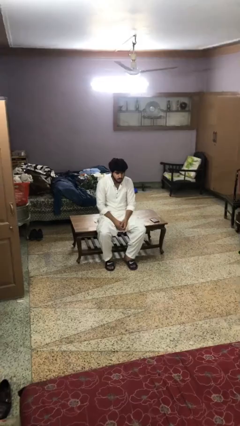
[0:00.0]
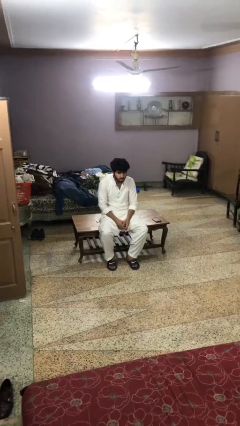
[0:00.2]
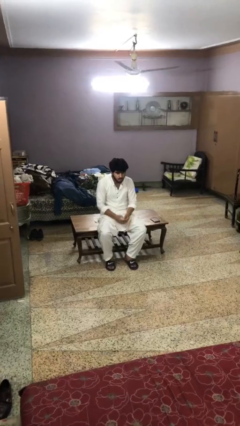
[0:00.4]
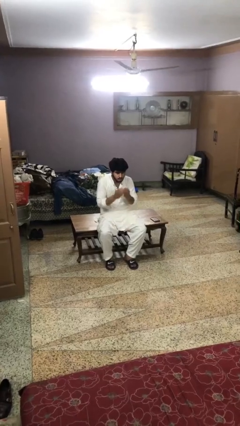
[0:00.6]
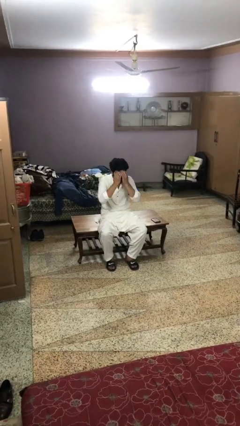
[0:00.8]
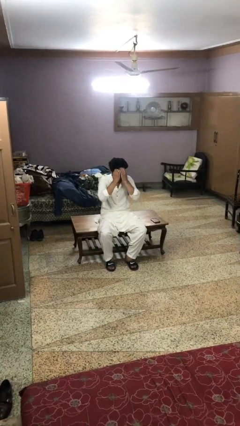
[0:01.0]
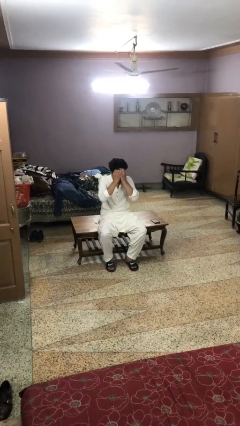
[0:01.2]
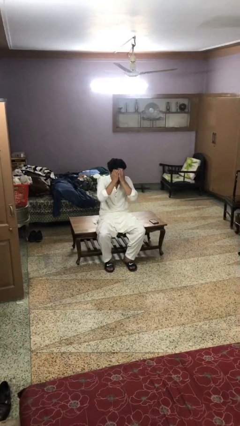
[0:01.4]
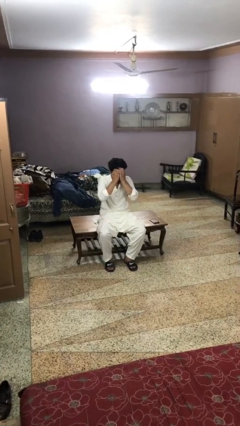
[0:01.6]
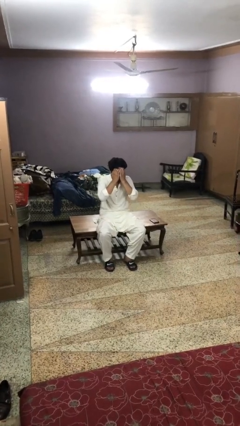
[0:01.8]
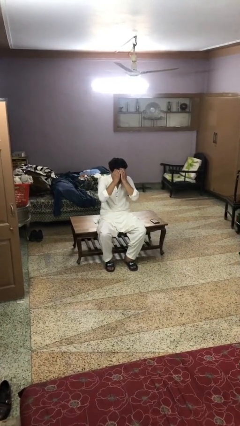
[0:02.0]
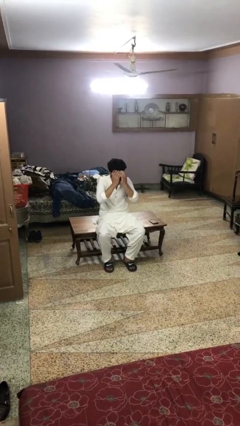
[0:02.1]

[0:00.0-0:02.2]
person covers face with hands

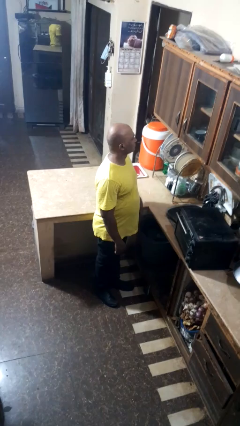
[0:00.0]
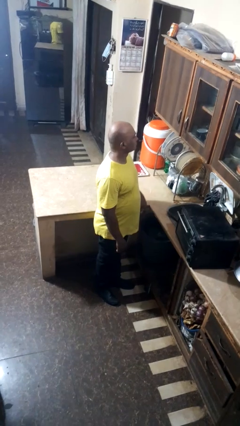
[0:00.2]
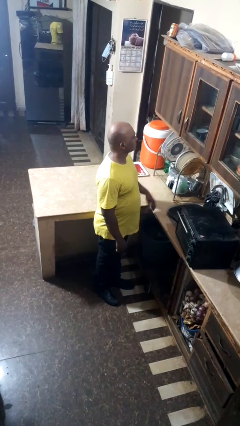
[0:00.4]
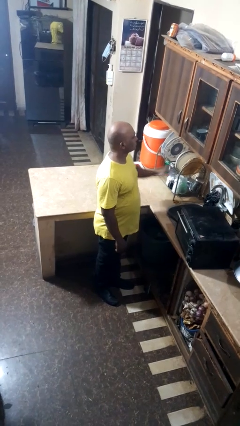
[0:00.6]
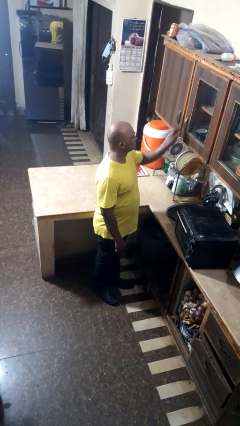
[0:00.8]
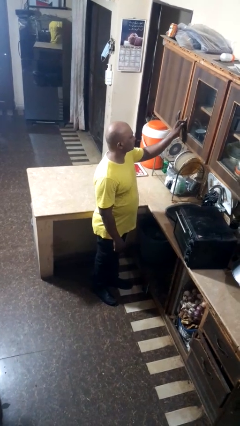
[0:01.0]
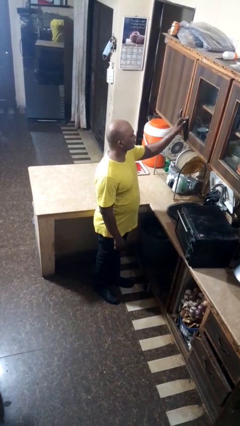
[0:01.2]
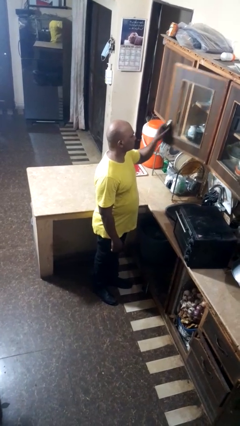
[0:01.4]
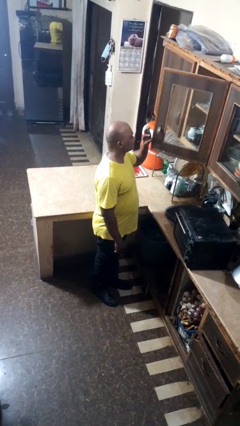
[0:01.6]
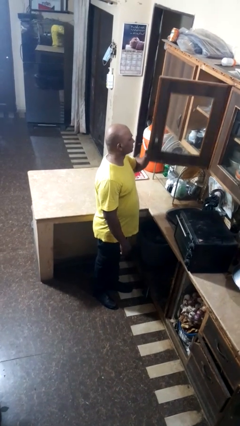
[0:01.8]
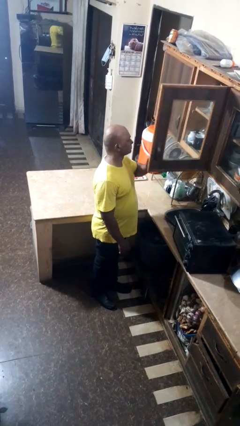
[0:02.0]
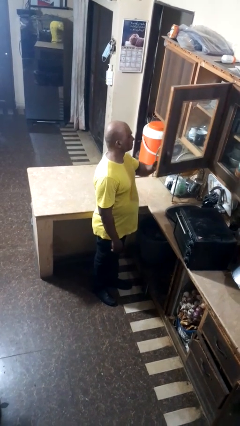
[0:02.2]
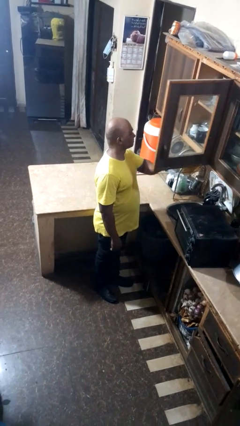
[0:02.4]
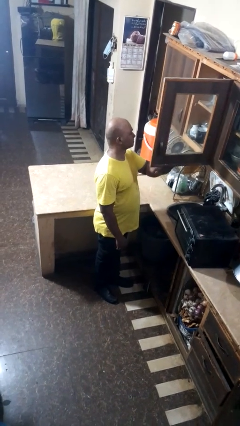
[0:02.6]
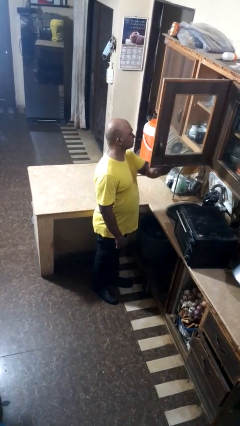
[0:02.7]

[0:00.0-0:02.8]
person opens cabinet

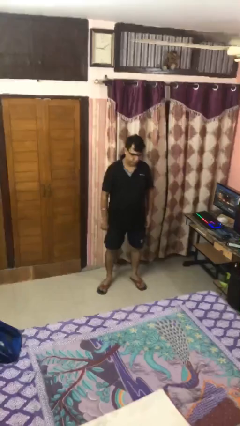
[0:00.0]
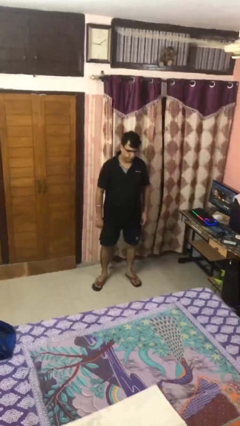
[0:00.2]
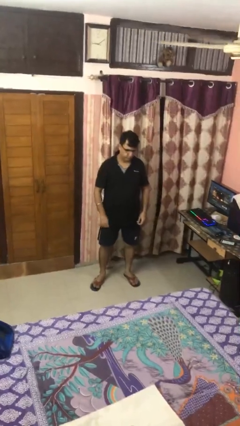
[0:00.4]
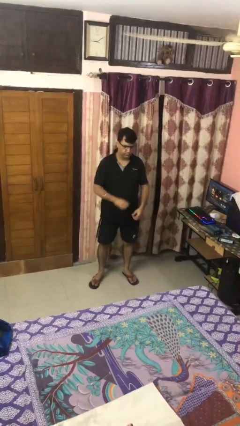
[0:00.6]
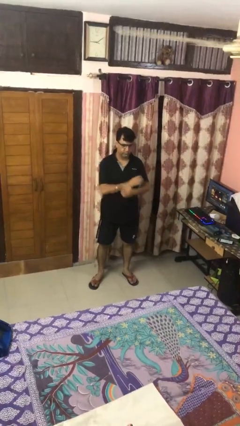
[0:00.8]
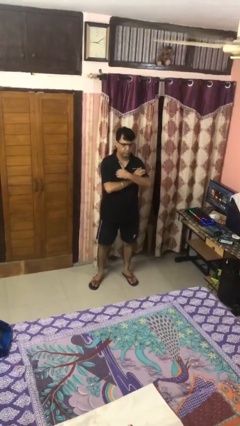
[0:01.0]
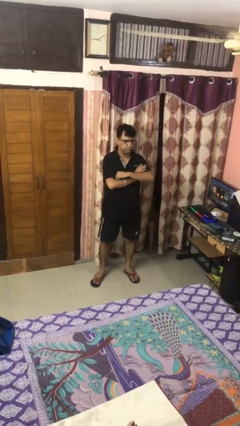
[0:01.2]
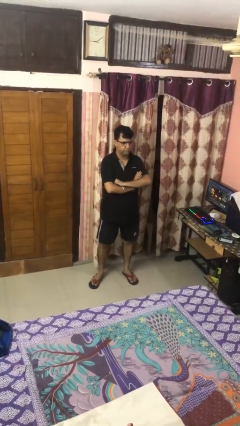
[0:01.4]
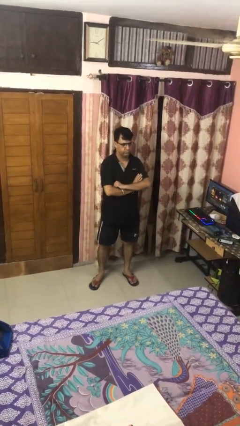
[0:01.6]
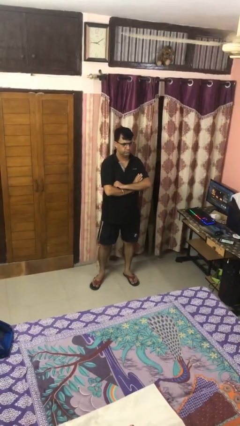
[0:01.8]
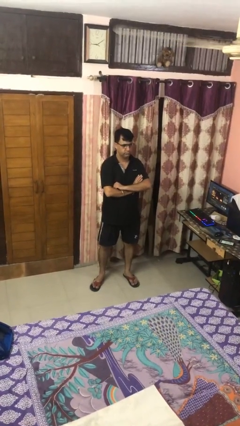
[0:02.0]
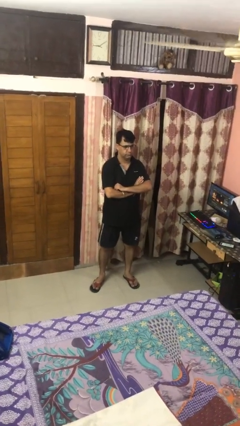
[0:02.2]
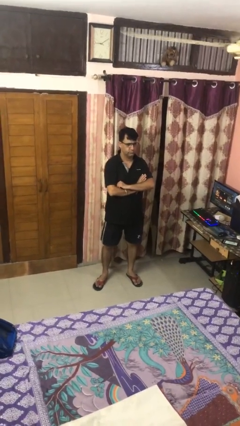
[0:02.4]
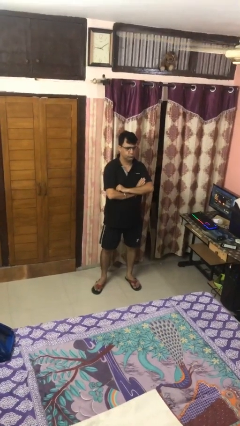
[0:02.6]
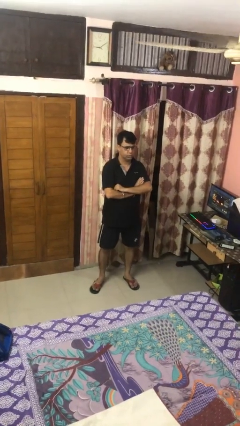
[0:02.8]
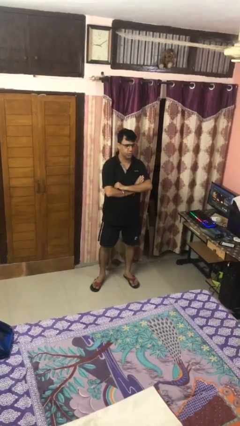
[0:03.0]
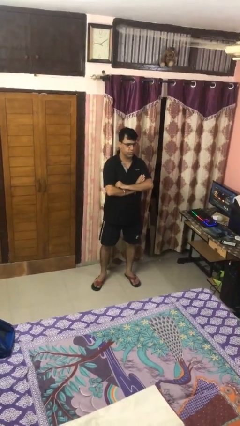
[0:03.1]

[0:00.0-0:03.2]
person crosses arms

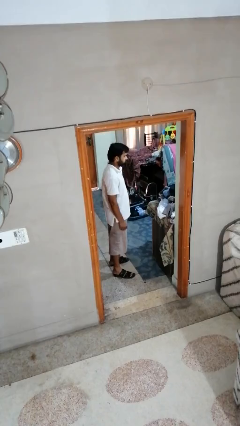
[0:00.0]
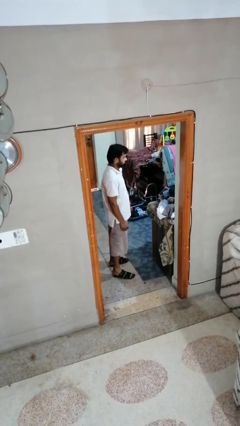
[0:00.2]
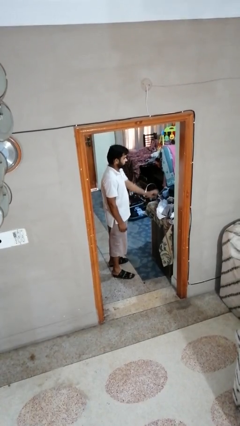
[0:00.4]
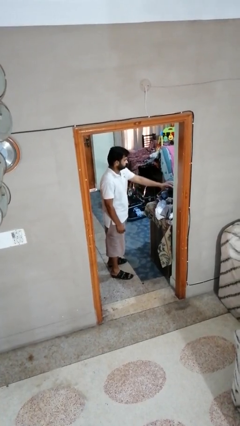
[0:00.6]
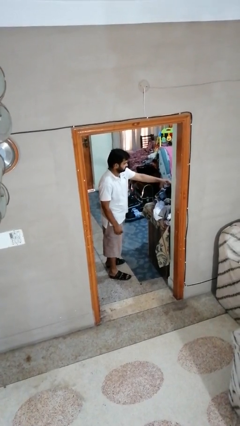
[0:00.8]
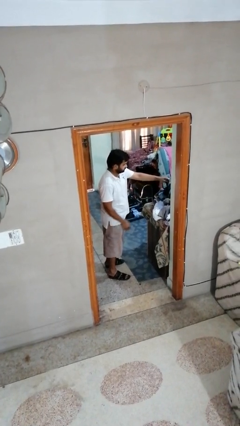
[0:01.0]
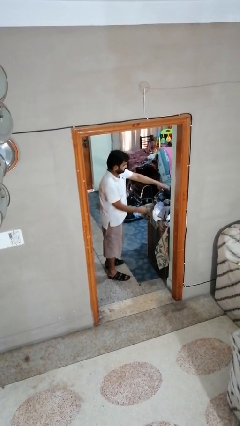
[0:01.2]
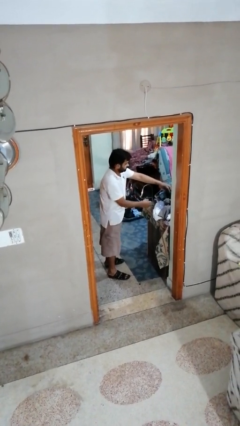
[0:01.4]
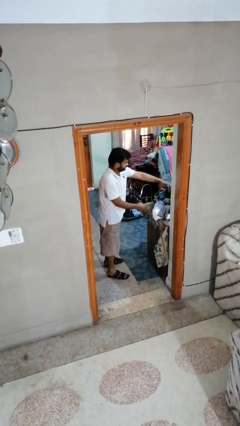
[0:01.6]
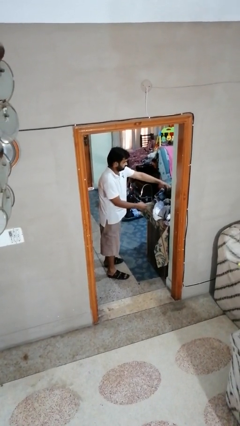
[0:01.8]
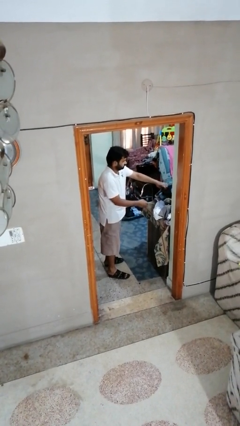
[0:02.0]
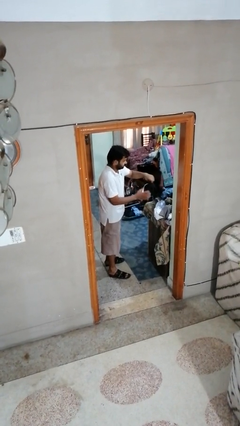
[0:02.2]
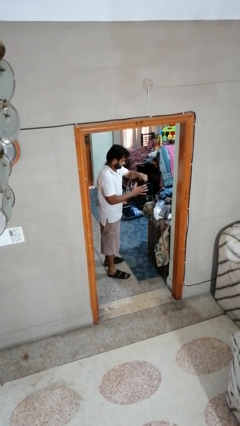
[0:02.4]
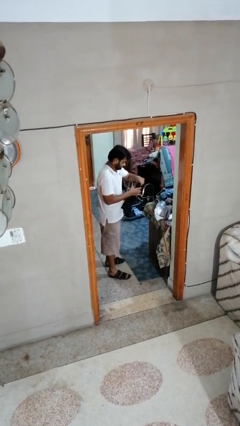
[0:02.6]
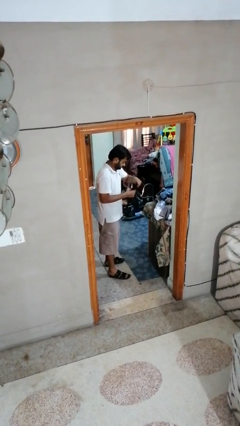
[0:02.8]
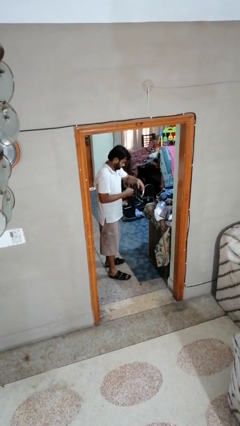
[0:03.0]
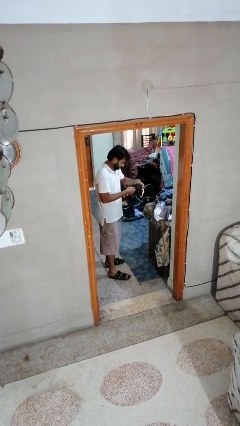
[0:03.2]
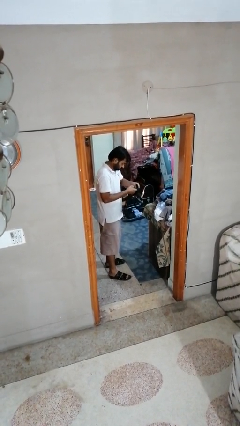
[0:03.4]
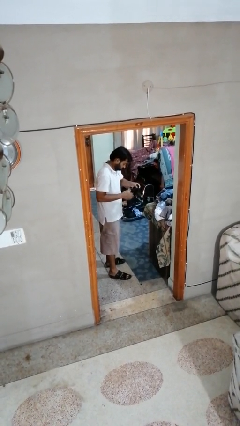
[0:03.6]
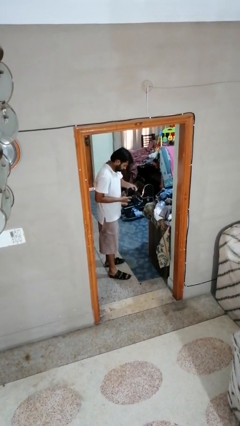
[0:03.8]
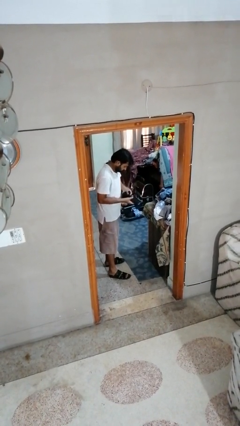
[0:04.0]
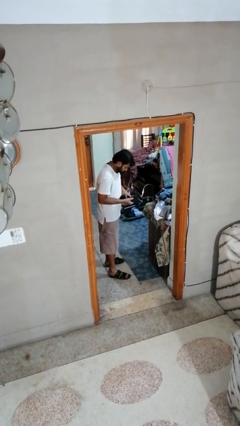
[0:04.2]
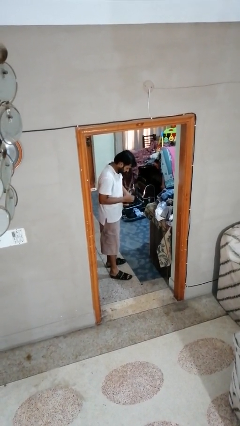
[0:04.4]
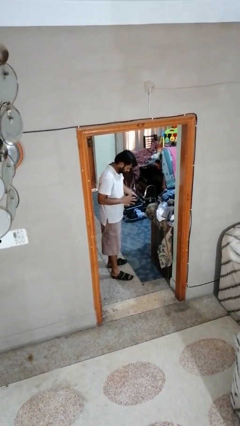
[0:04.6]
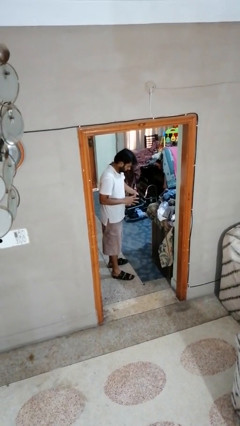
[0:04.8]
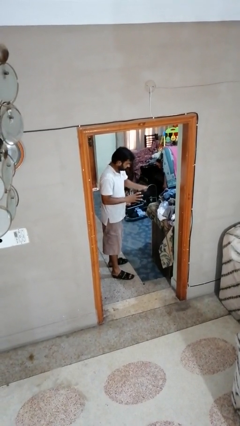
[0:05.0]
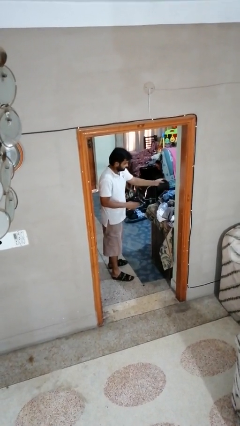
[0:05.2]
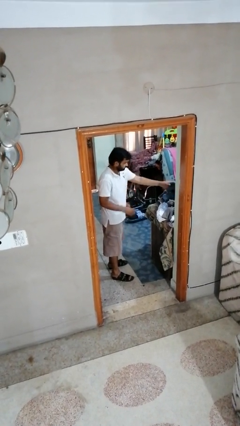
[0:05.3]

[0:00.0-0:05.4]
person folds socks

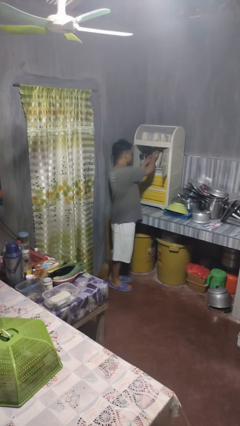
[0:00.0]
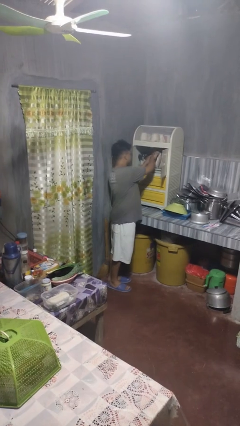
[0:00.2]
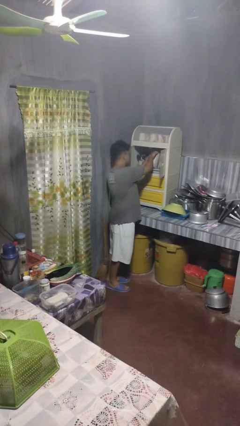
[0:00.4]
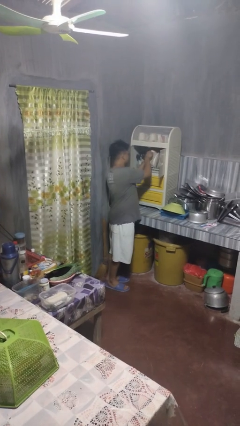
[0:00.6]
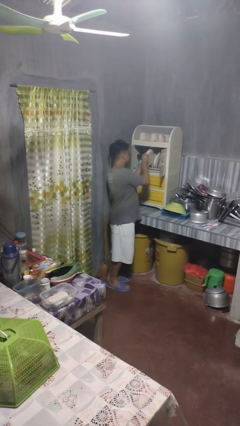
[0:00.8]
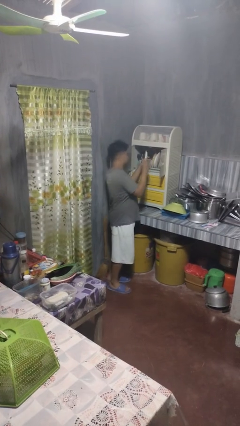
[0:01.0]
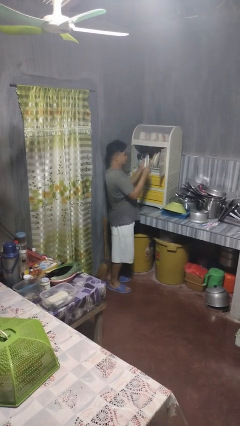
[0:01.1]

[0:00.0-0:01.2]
person takes object from cabinet

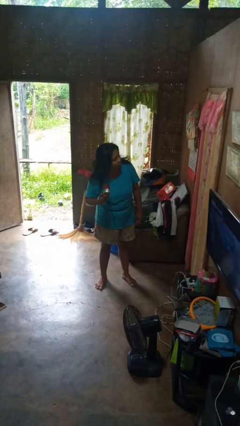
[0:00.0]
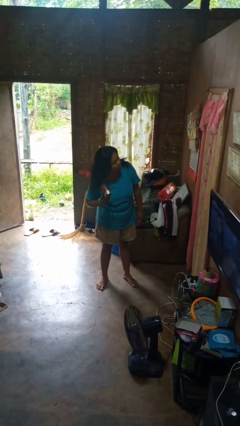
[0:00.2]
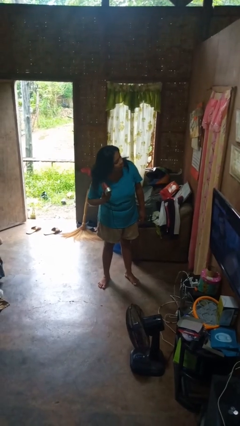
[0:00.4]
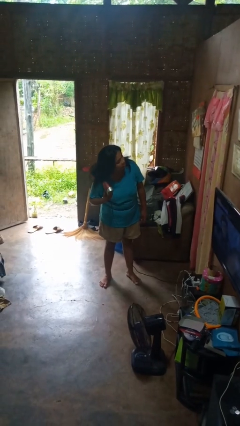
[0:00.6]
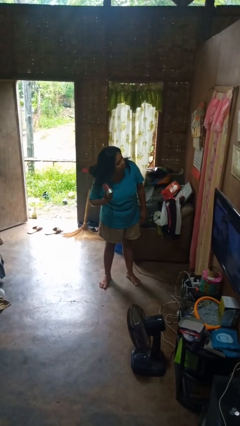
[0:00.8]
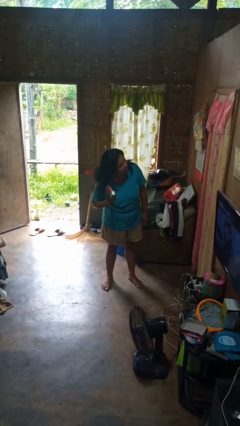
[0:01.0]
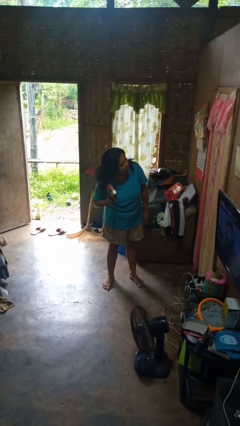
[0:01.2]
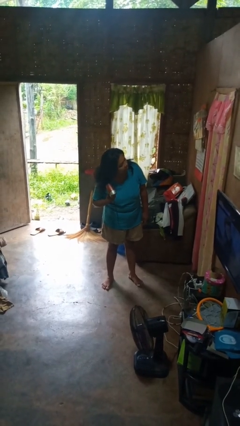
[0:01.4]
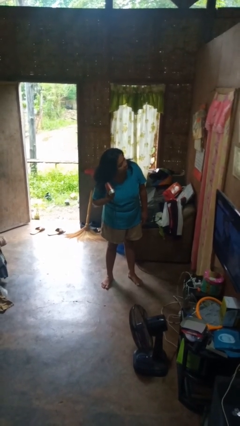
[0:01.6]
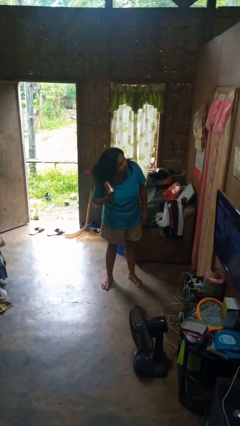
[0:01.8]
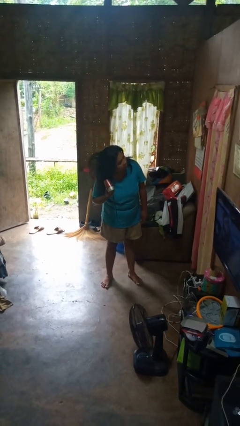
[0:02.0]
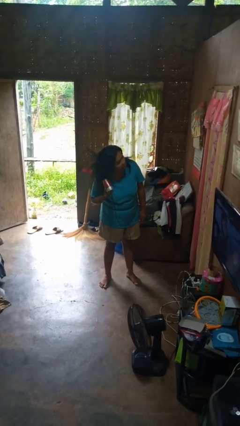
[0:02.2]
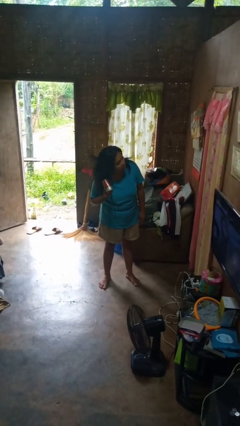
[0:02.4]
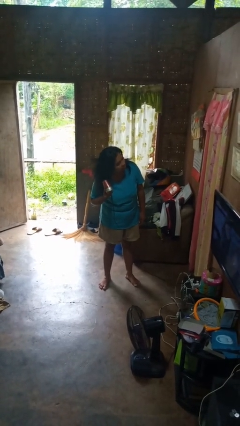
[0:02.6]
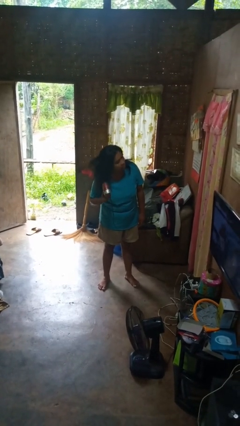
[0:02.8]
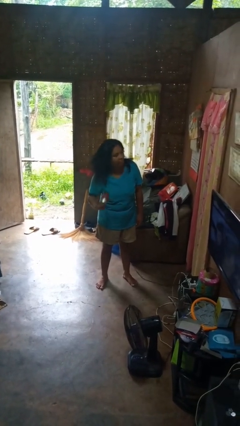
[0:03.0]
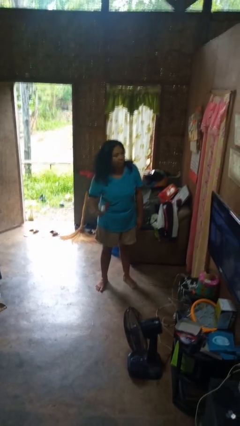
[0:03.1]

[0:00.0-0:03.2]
person dries hair with hairdryer
